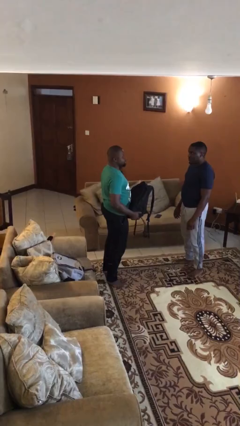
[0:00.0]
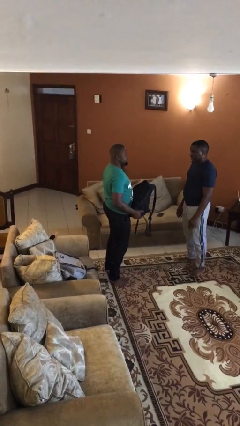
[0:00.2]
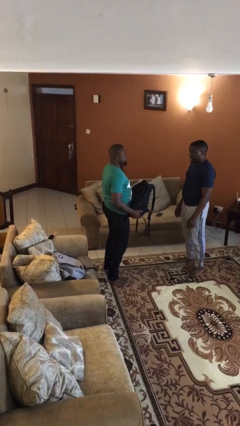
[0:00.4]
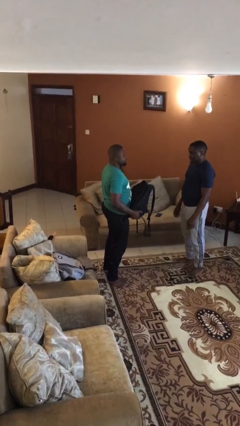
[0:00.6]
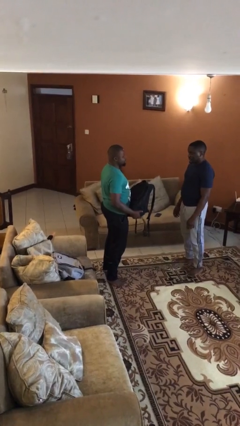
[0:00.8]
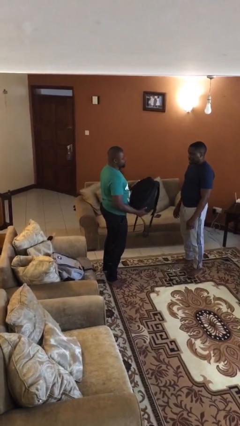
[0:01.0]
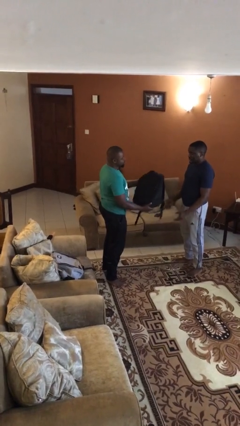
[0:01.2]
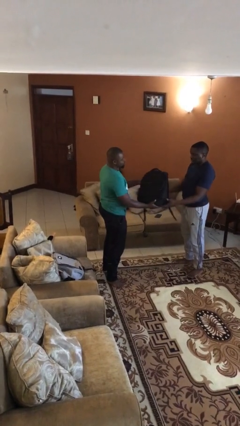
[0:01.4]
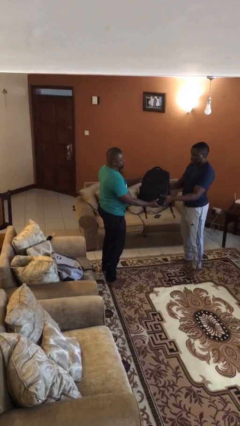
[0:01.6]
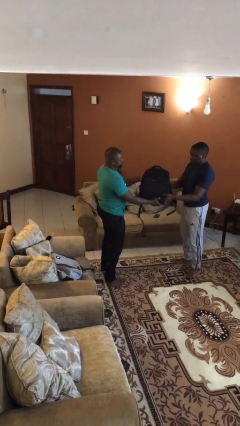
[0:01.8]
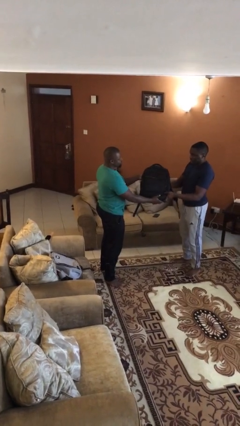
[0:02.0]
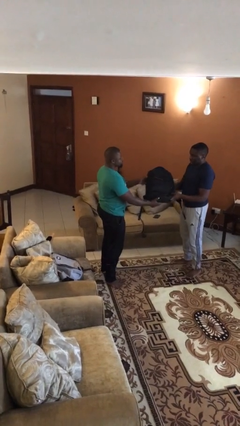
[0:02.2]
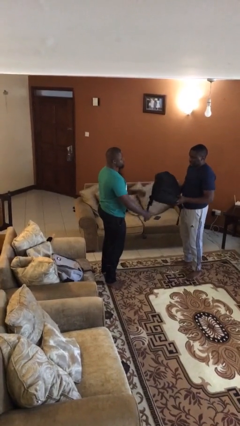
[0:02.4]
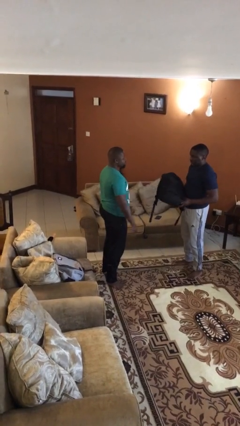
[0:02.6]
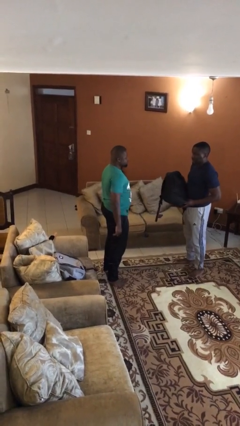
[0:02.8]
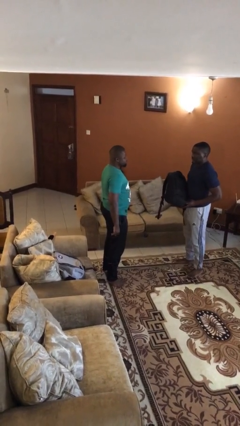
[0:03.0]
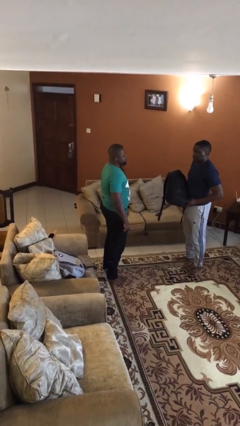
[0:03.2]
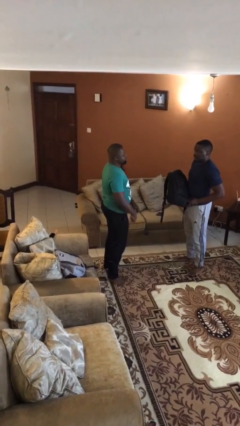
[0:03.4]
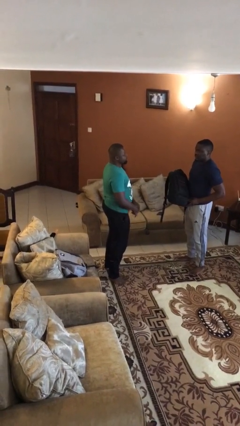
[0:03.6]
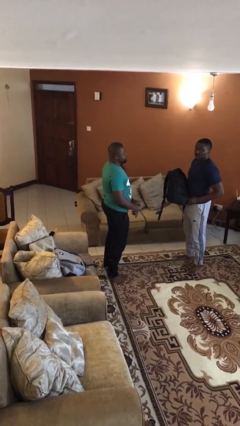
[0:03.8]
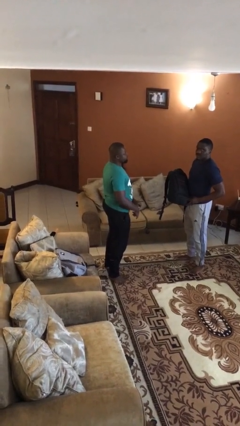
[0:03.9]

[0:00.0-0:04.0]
person transfers object to person

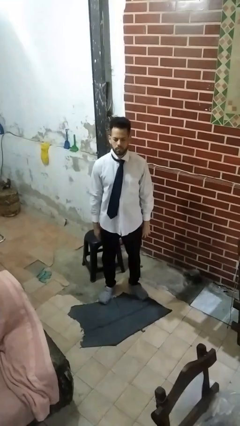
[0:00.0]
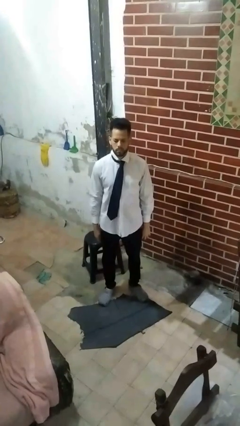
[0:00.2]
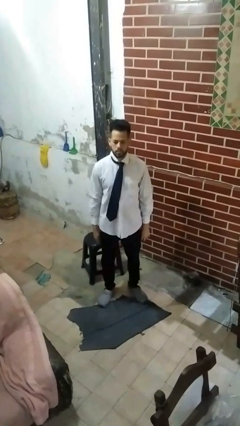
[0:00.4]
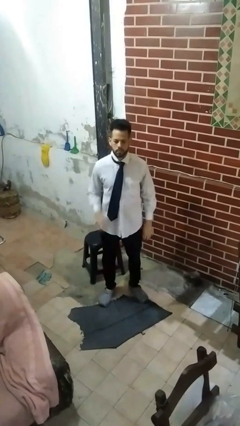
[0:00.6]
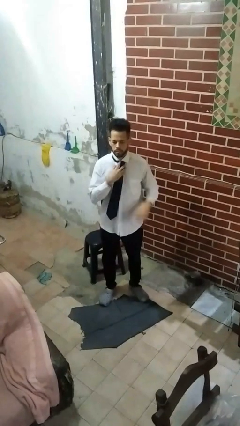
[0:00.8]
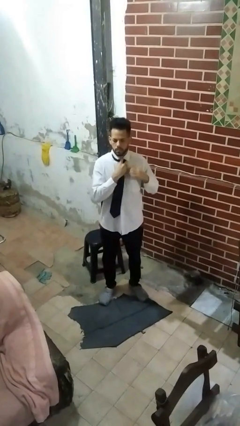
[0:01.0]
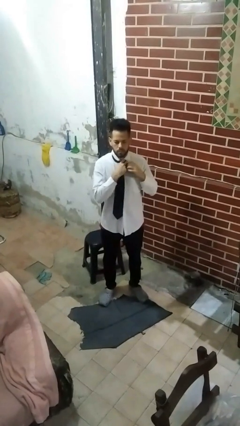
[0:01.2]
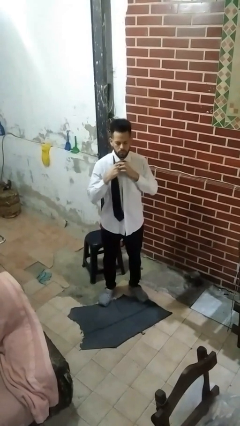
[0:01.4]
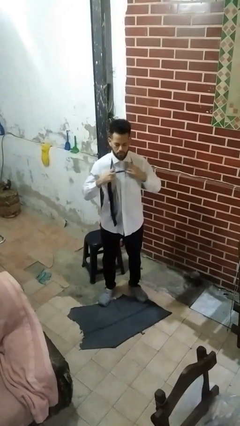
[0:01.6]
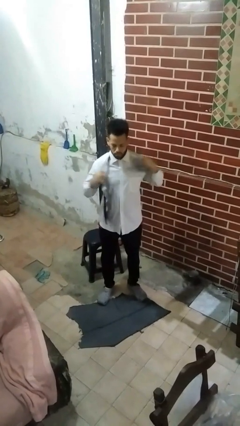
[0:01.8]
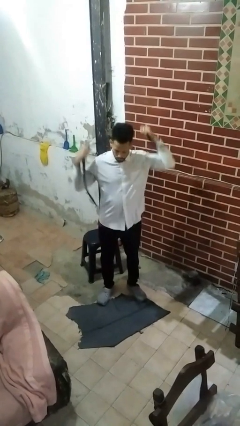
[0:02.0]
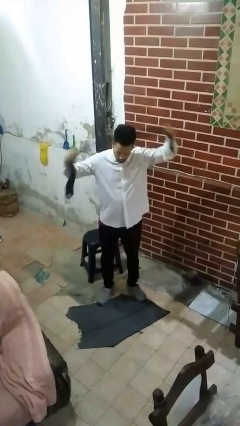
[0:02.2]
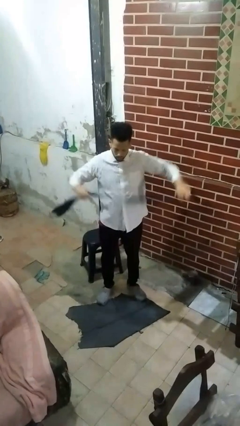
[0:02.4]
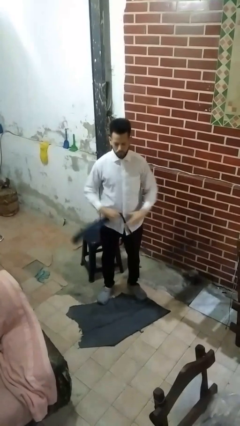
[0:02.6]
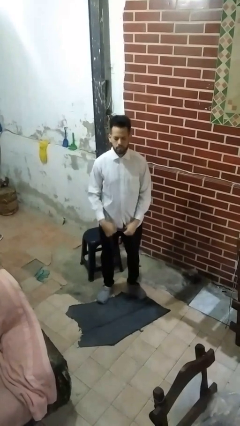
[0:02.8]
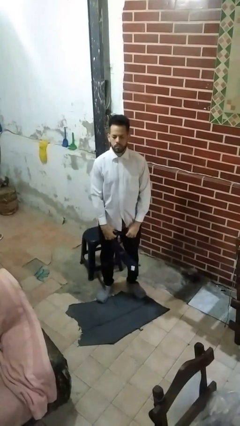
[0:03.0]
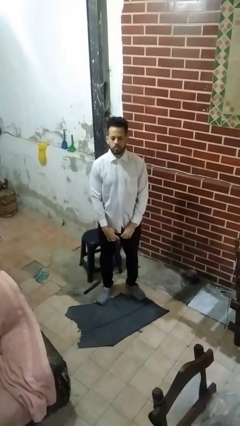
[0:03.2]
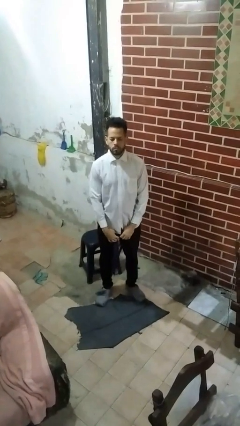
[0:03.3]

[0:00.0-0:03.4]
person takes off necktie

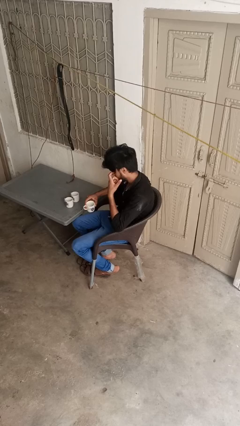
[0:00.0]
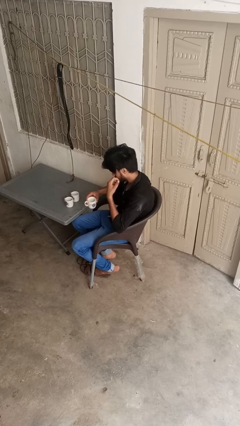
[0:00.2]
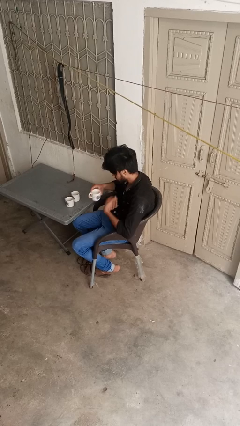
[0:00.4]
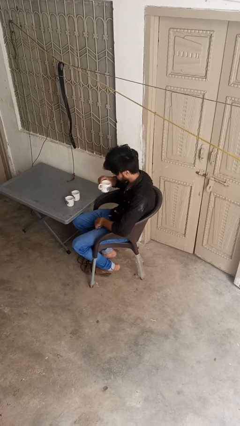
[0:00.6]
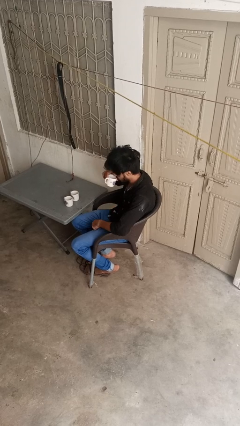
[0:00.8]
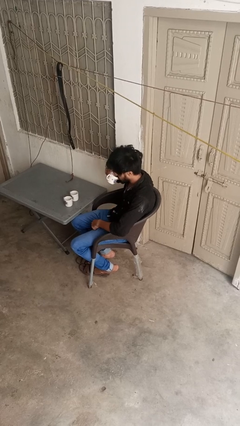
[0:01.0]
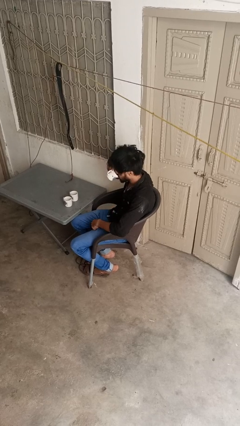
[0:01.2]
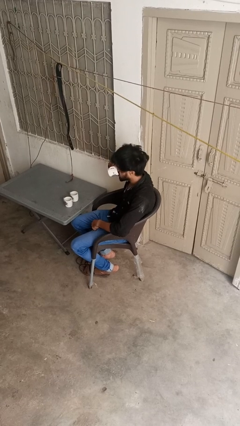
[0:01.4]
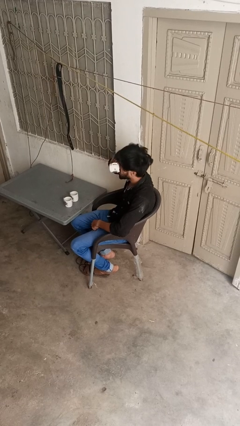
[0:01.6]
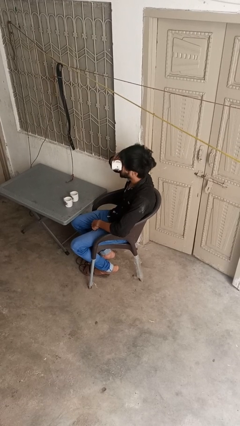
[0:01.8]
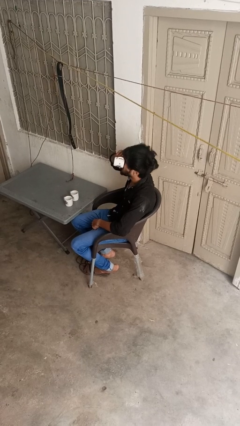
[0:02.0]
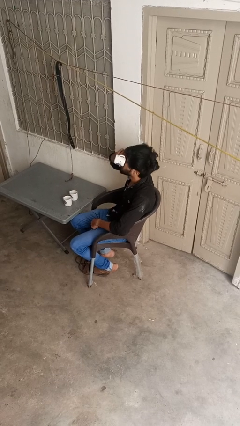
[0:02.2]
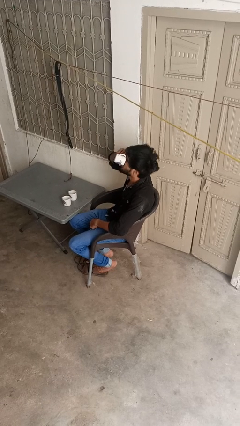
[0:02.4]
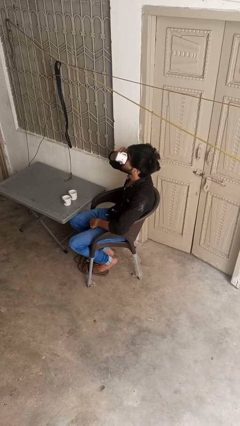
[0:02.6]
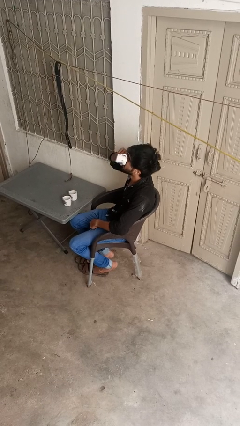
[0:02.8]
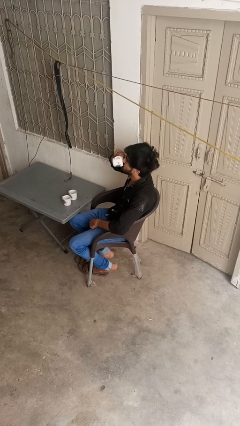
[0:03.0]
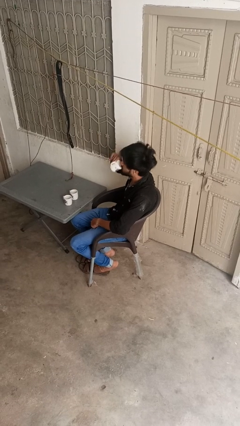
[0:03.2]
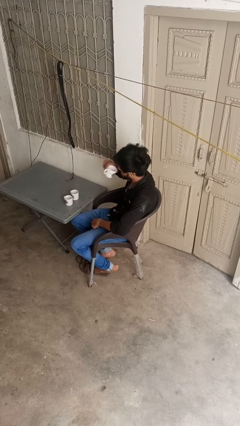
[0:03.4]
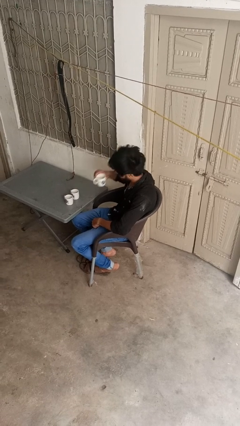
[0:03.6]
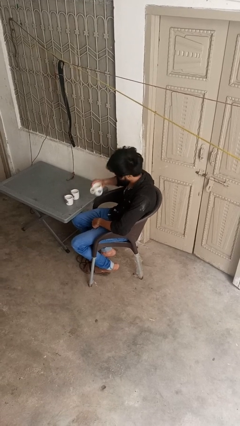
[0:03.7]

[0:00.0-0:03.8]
person drinks from shotglass

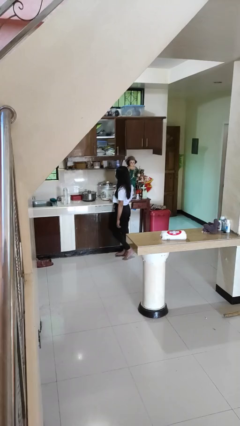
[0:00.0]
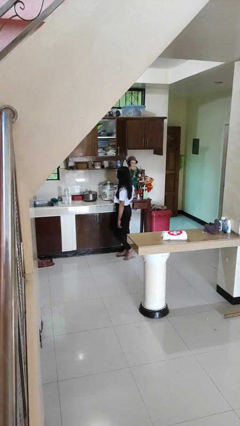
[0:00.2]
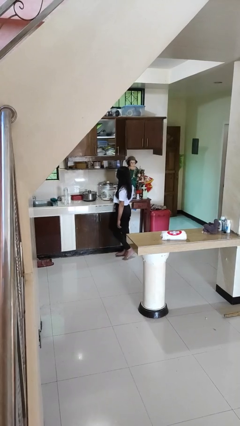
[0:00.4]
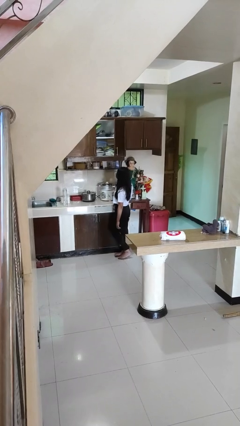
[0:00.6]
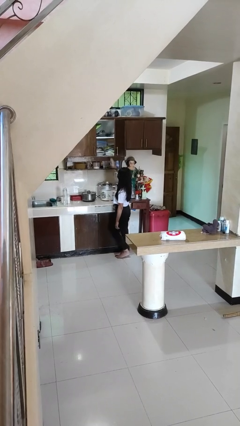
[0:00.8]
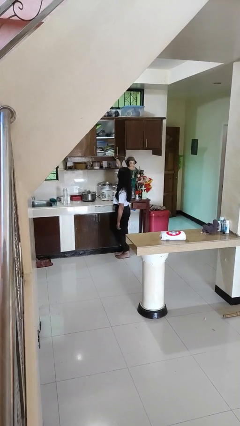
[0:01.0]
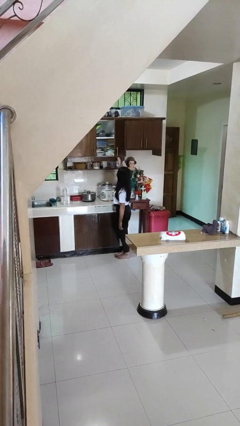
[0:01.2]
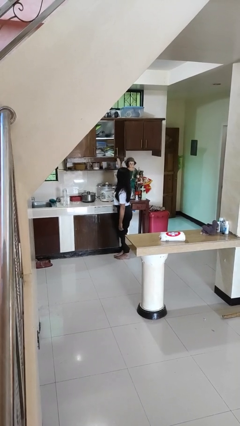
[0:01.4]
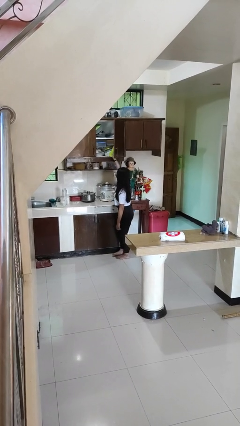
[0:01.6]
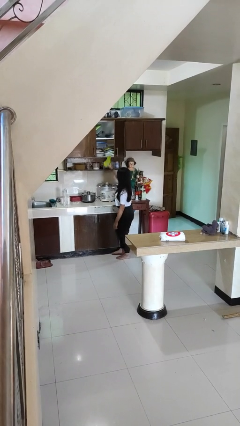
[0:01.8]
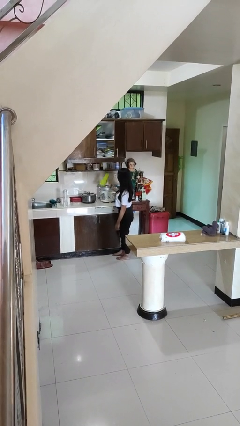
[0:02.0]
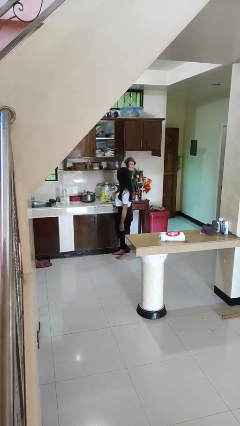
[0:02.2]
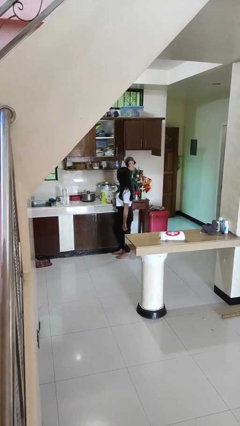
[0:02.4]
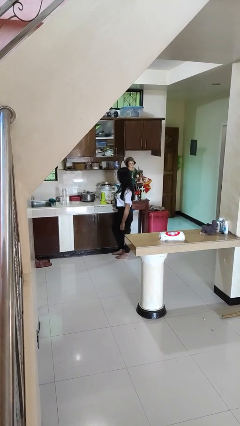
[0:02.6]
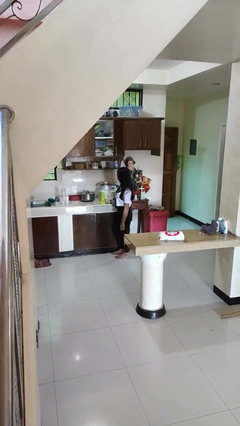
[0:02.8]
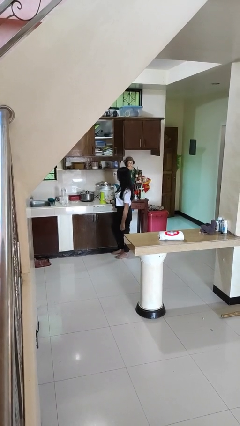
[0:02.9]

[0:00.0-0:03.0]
person picks up object from cabinet

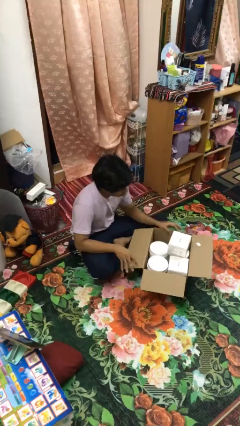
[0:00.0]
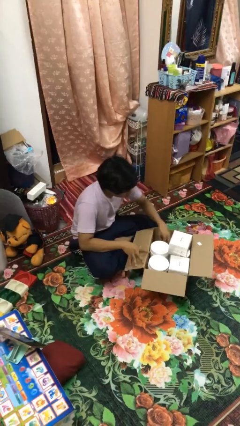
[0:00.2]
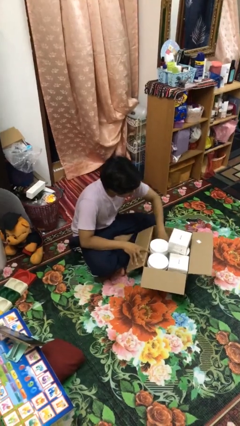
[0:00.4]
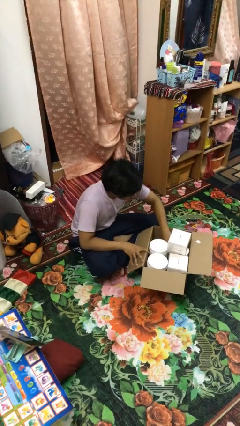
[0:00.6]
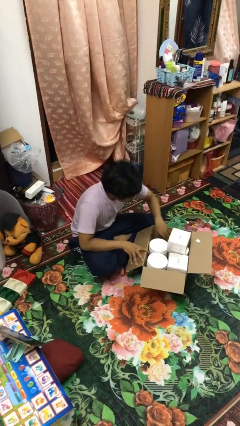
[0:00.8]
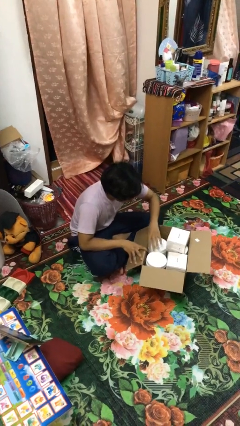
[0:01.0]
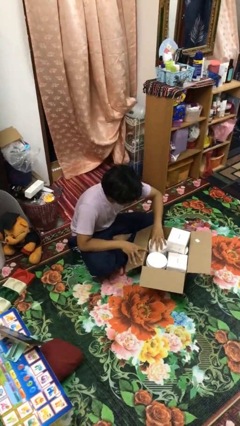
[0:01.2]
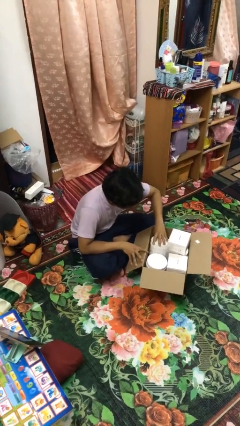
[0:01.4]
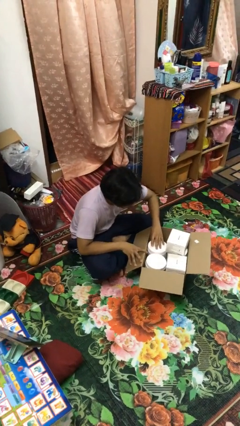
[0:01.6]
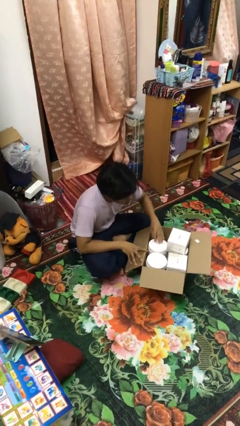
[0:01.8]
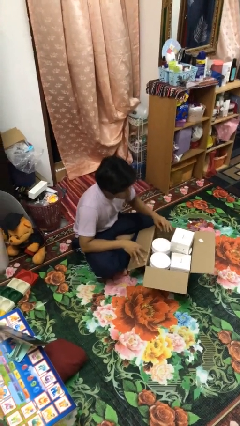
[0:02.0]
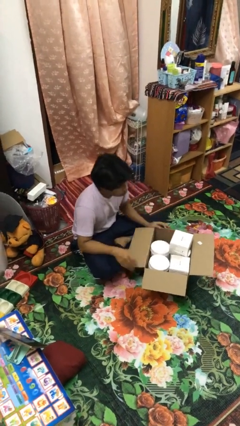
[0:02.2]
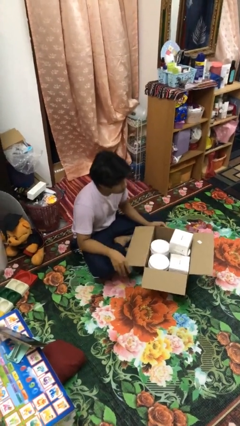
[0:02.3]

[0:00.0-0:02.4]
person searches in box

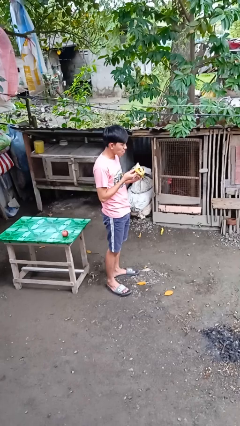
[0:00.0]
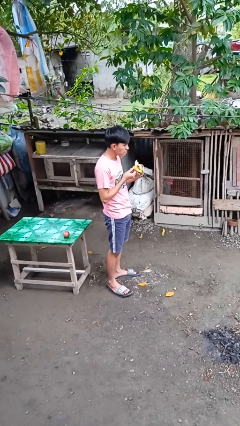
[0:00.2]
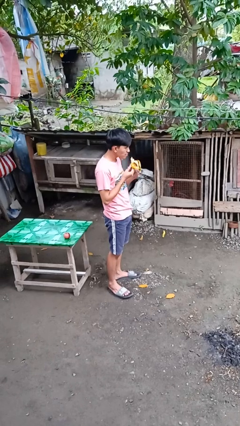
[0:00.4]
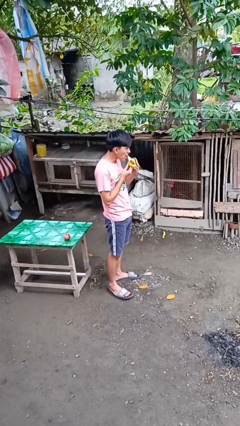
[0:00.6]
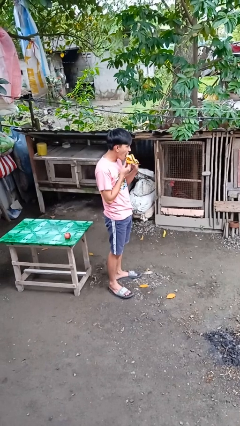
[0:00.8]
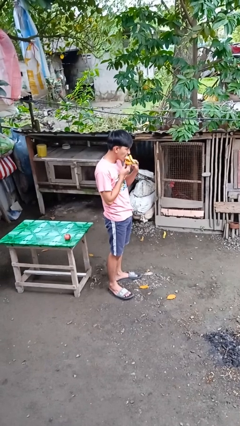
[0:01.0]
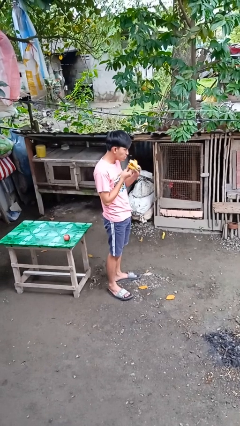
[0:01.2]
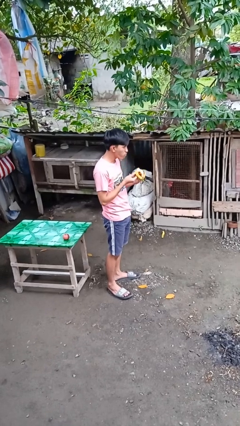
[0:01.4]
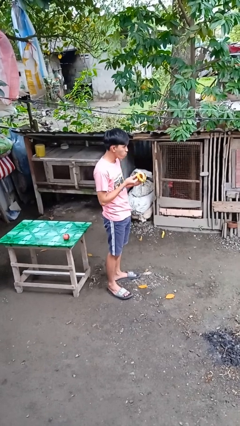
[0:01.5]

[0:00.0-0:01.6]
person eats banana
